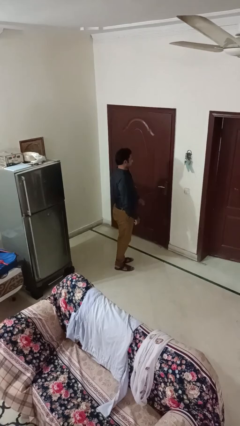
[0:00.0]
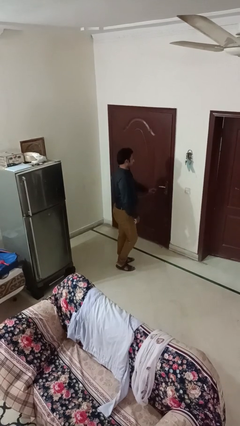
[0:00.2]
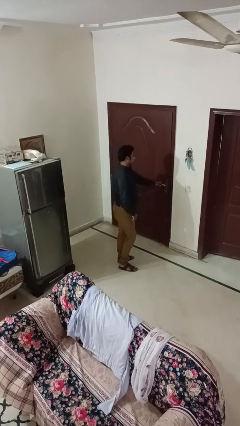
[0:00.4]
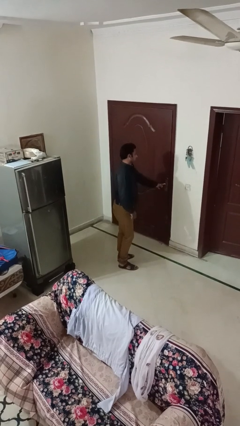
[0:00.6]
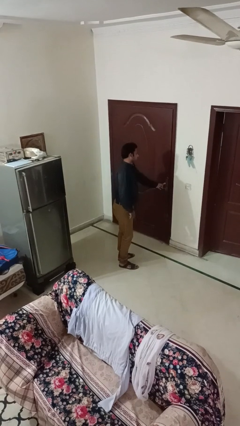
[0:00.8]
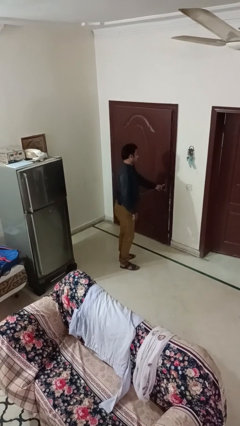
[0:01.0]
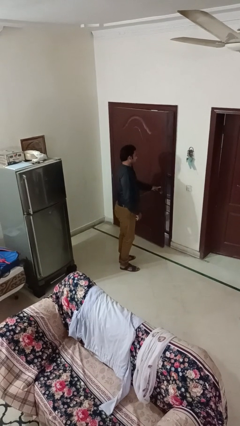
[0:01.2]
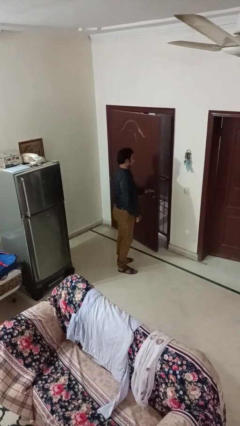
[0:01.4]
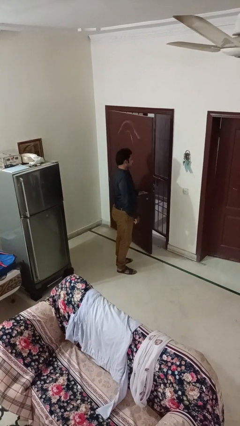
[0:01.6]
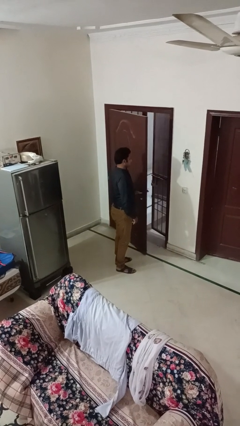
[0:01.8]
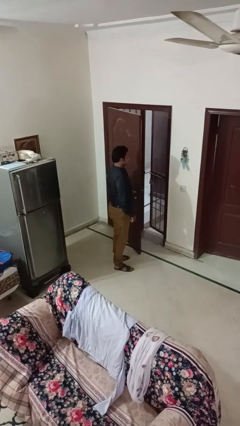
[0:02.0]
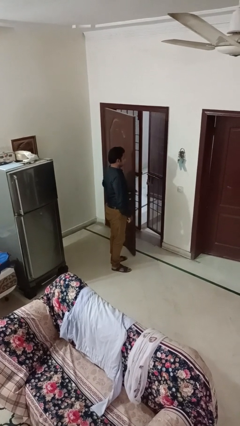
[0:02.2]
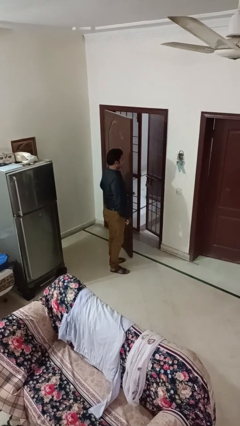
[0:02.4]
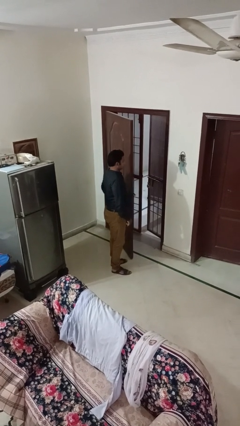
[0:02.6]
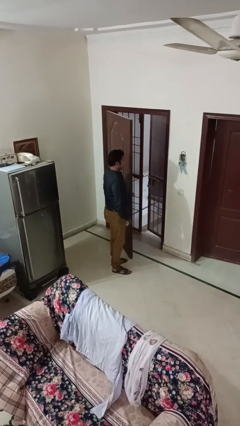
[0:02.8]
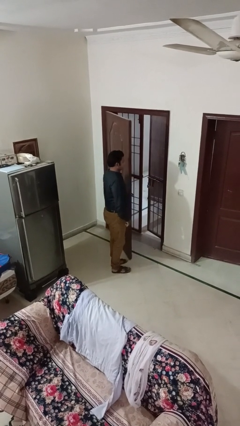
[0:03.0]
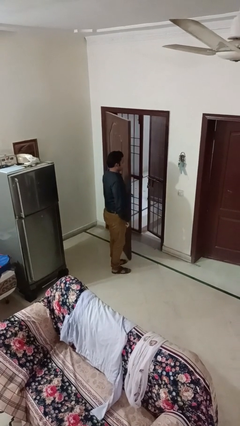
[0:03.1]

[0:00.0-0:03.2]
person opens facility door

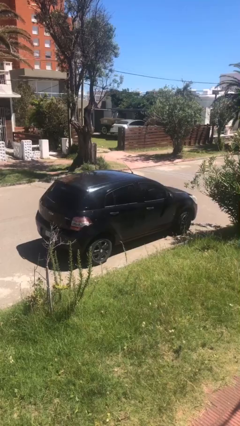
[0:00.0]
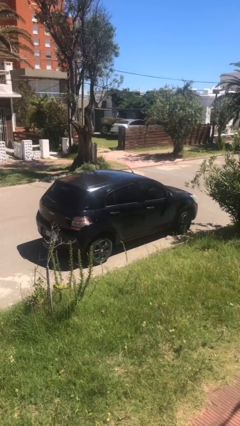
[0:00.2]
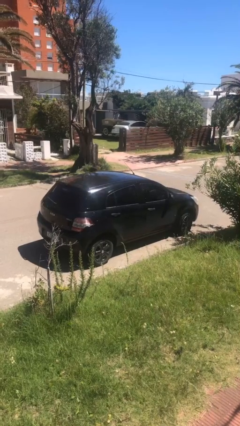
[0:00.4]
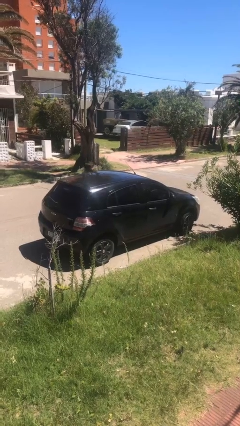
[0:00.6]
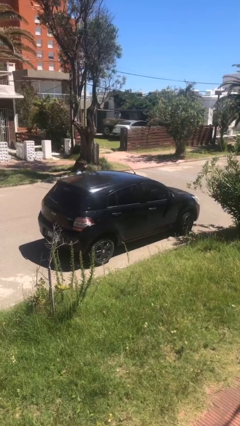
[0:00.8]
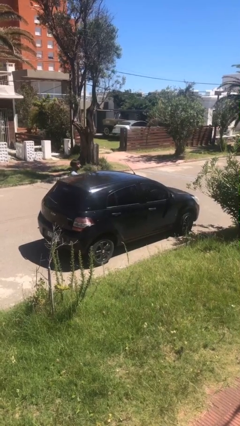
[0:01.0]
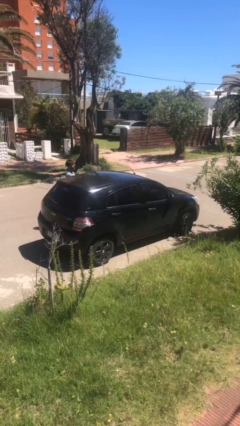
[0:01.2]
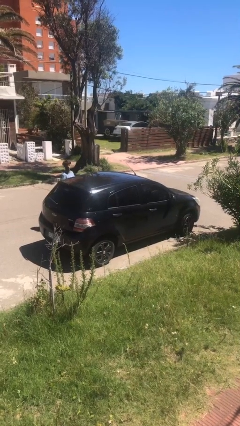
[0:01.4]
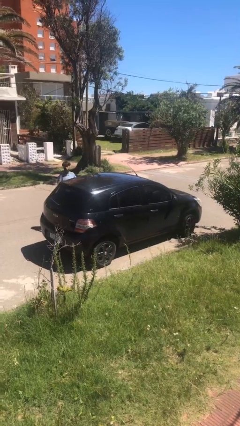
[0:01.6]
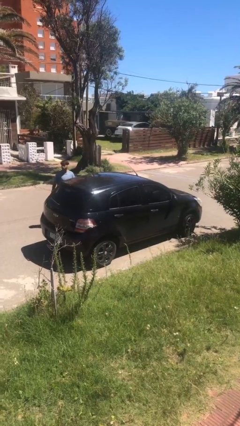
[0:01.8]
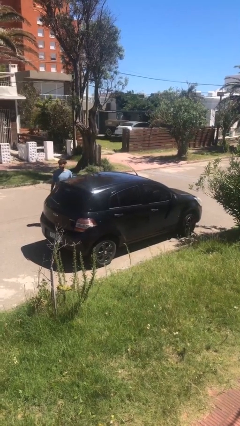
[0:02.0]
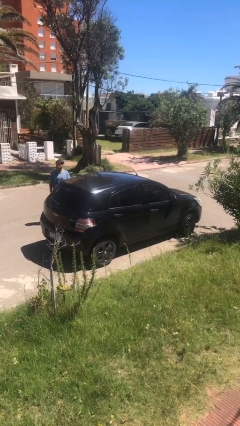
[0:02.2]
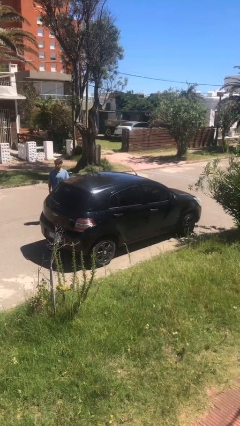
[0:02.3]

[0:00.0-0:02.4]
car drops off person

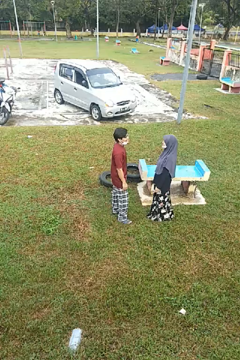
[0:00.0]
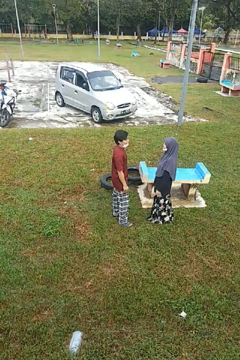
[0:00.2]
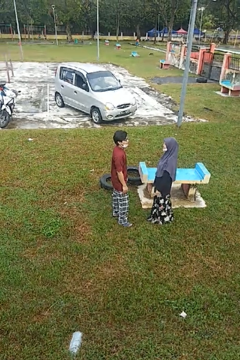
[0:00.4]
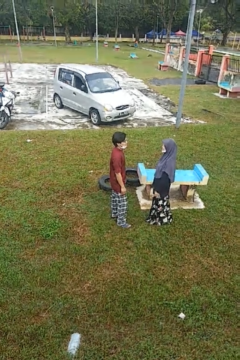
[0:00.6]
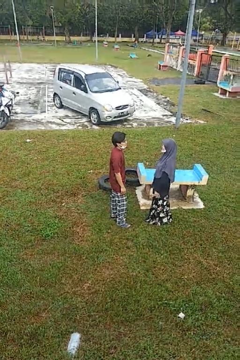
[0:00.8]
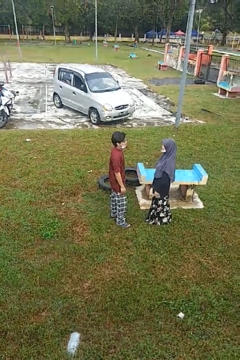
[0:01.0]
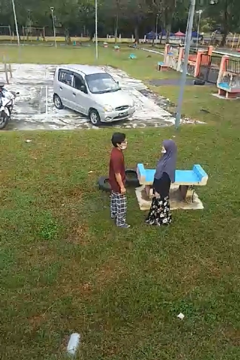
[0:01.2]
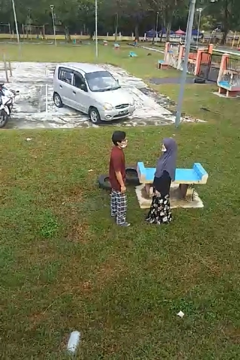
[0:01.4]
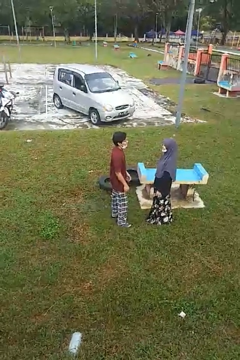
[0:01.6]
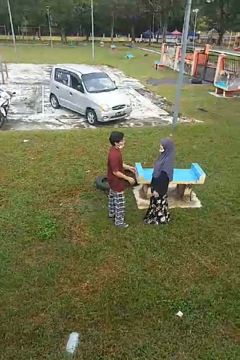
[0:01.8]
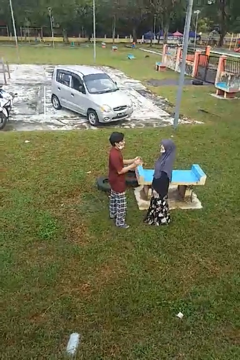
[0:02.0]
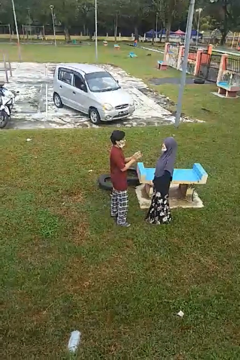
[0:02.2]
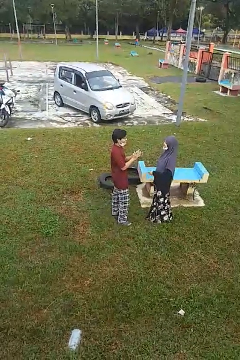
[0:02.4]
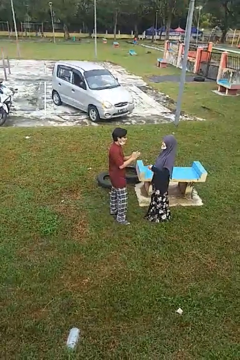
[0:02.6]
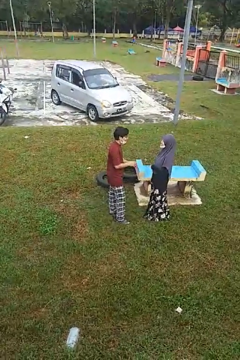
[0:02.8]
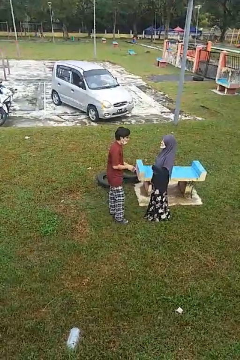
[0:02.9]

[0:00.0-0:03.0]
person laughs with person

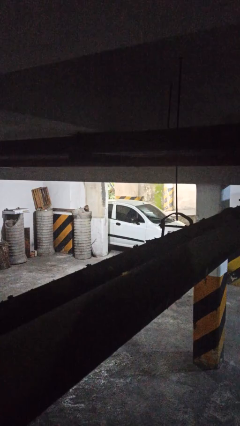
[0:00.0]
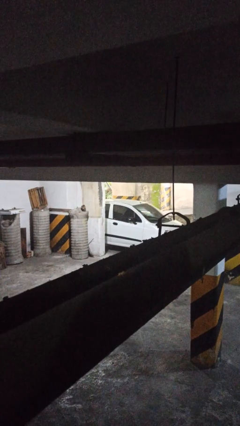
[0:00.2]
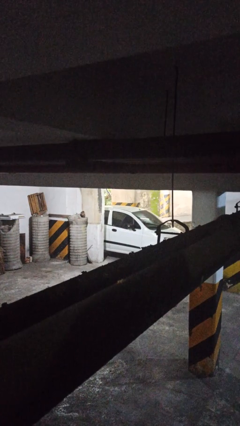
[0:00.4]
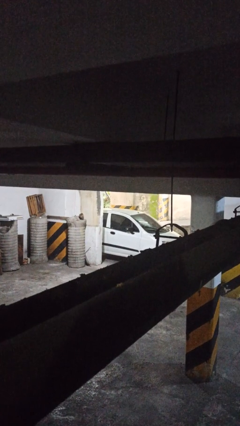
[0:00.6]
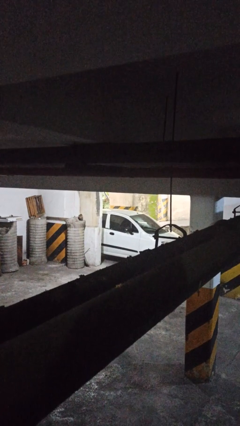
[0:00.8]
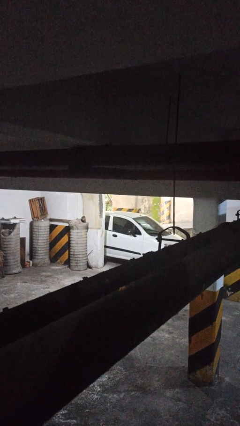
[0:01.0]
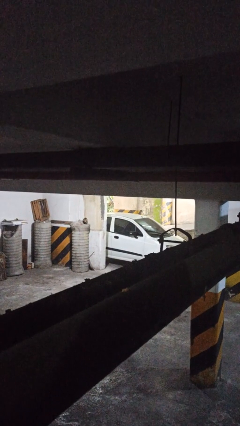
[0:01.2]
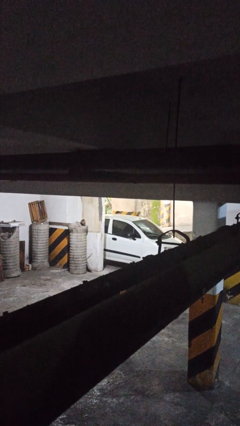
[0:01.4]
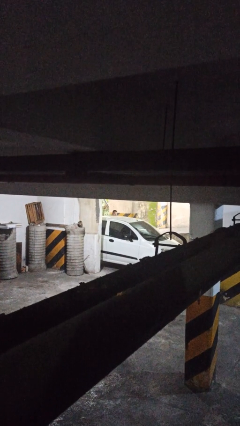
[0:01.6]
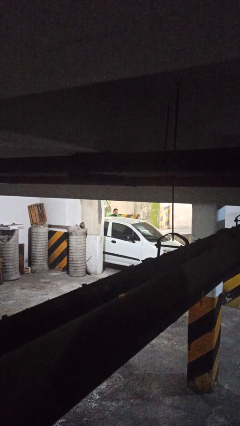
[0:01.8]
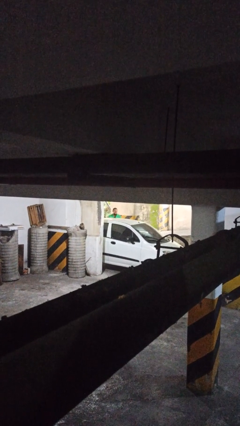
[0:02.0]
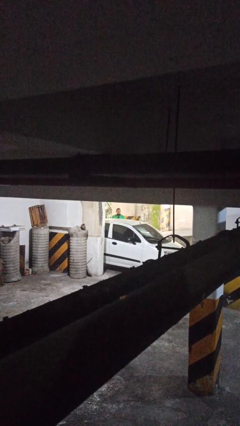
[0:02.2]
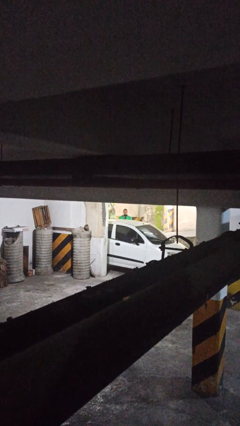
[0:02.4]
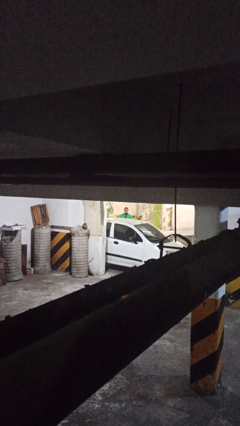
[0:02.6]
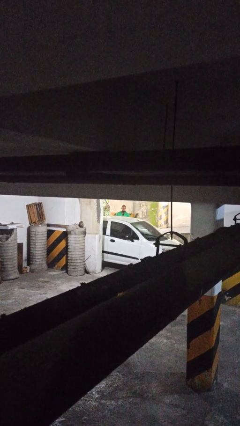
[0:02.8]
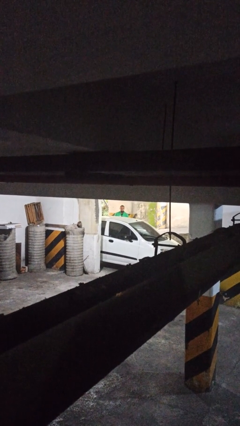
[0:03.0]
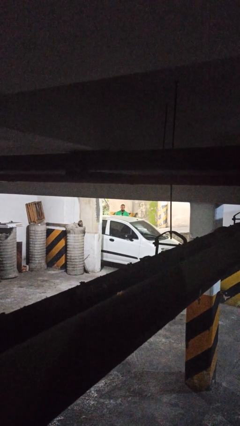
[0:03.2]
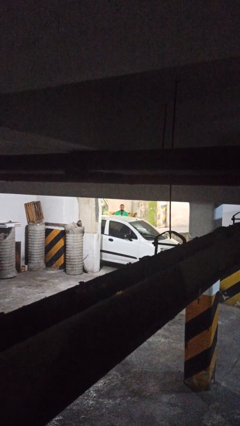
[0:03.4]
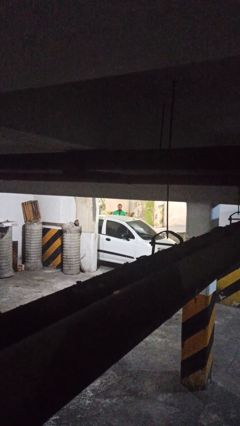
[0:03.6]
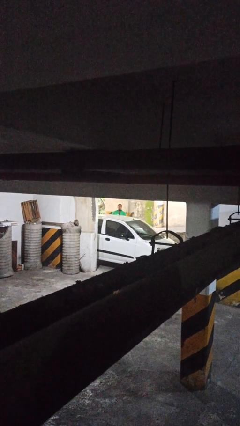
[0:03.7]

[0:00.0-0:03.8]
person exits car

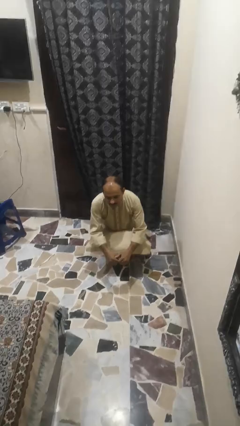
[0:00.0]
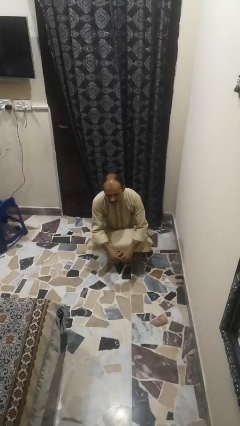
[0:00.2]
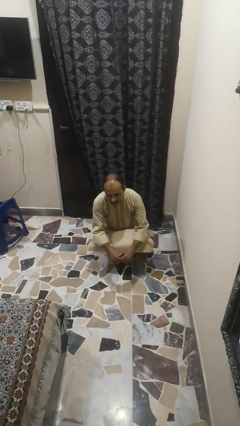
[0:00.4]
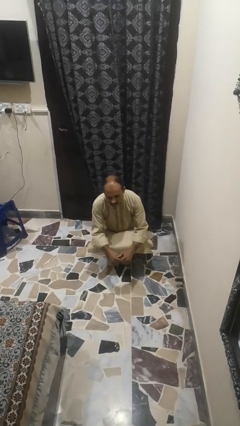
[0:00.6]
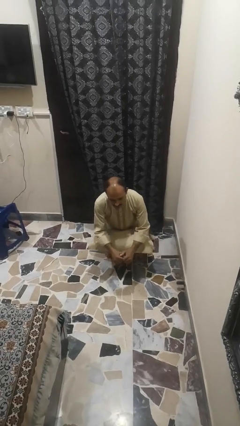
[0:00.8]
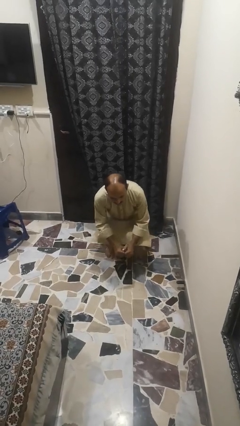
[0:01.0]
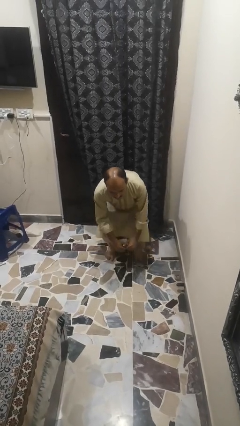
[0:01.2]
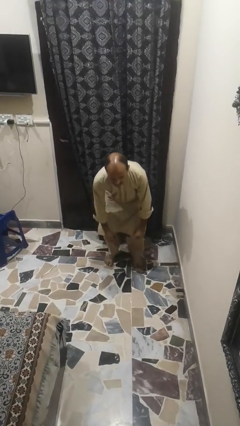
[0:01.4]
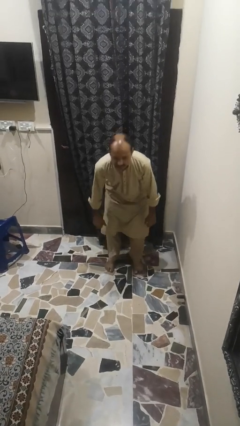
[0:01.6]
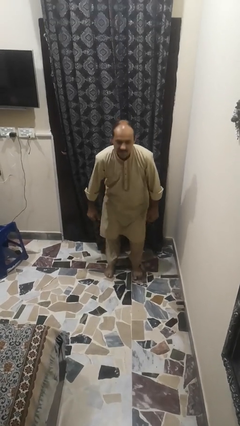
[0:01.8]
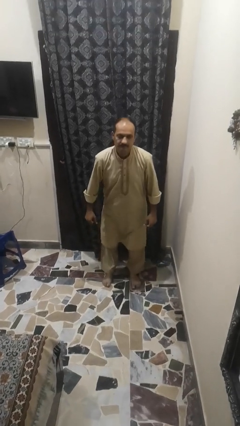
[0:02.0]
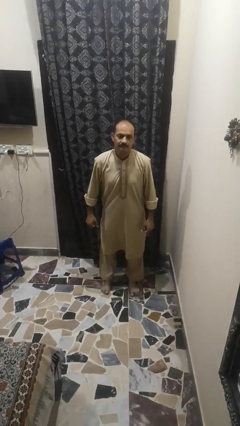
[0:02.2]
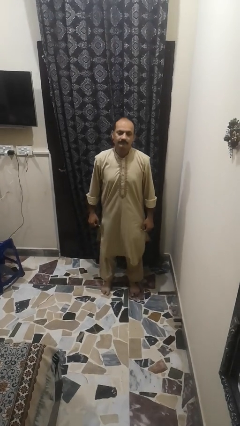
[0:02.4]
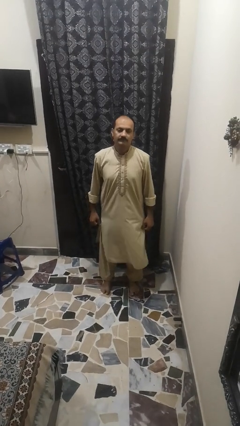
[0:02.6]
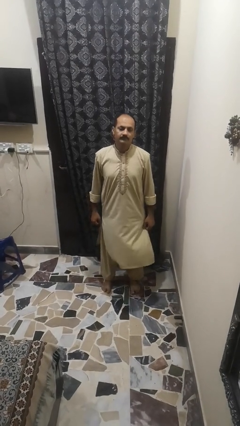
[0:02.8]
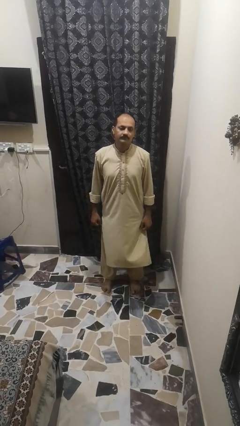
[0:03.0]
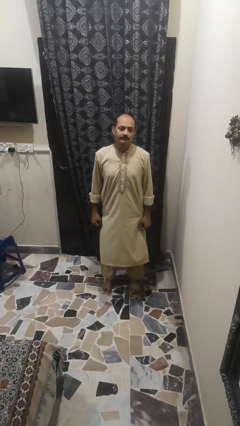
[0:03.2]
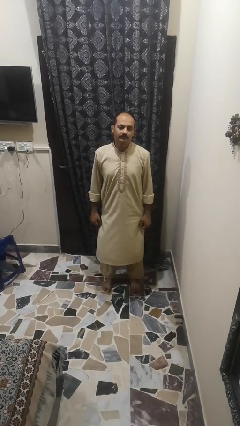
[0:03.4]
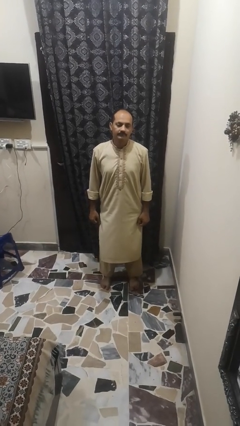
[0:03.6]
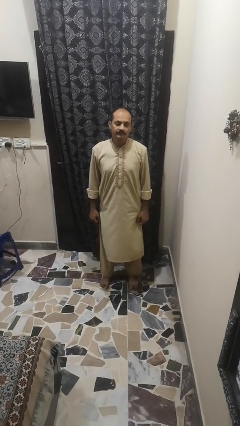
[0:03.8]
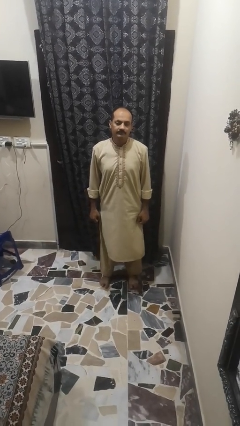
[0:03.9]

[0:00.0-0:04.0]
person stands up

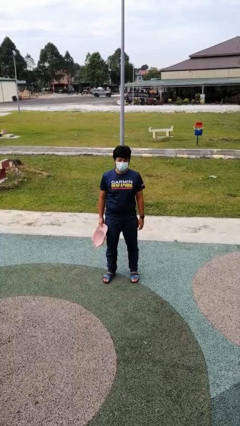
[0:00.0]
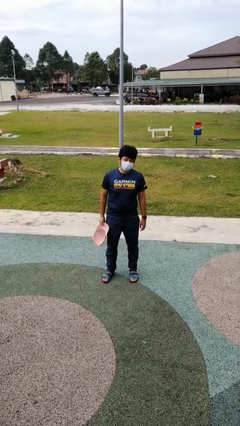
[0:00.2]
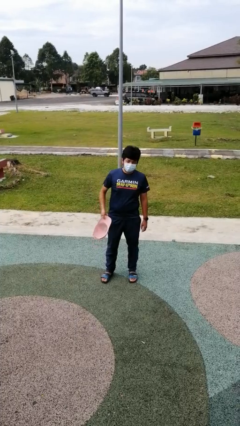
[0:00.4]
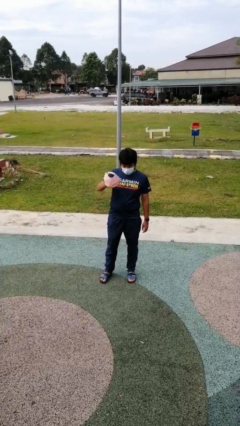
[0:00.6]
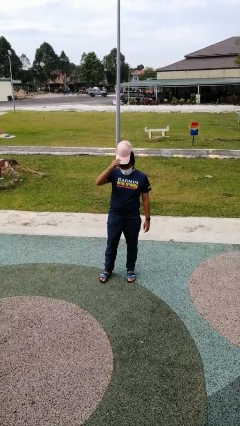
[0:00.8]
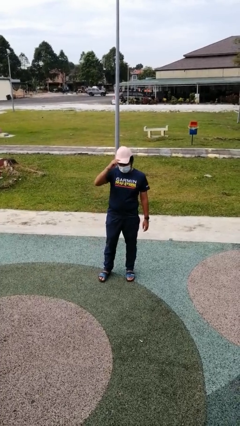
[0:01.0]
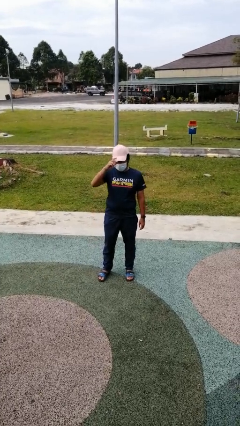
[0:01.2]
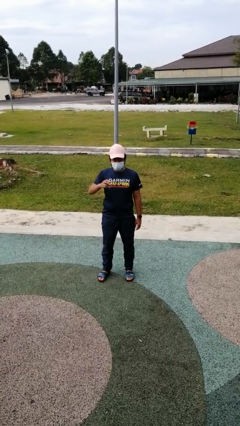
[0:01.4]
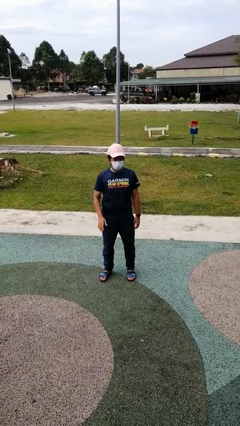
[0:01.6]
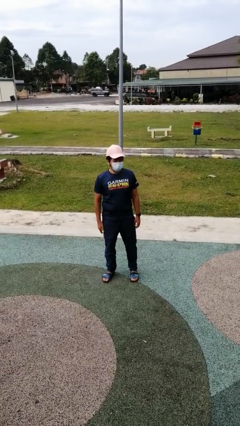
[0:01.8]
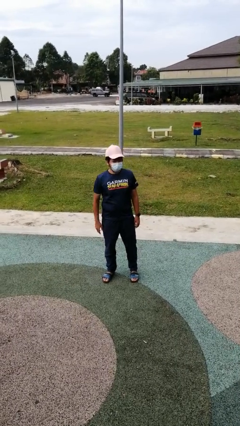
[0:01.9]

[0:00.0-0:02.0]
person puts on hat

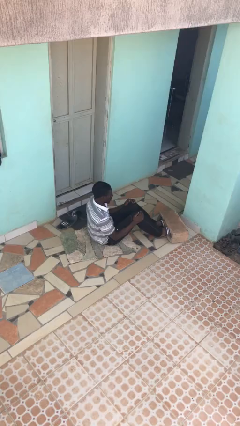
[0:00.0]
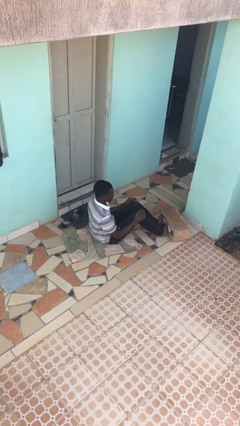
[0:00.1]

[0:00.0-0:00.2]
person exercises with situp
